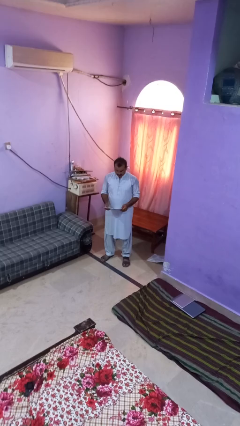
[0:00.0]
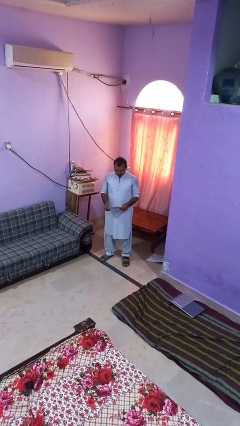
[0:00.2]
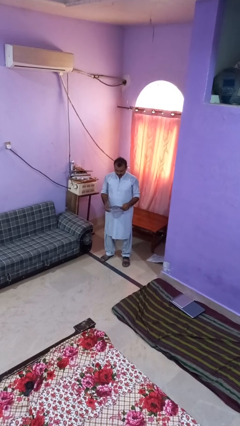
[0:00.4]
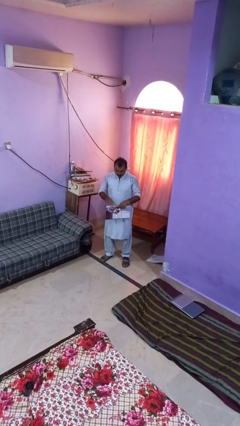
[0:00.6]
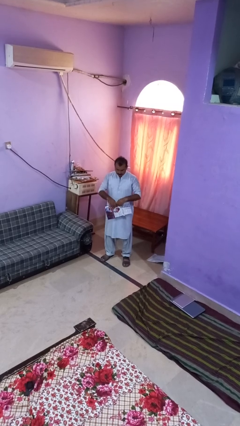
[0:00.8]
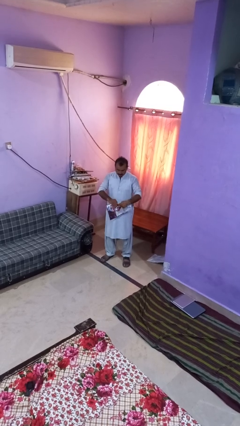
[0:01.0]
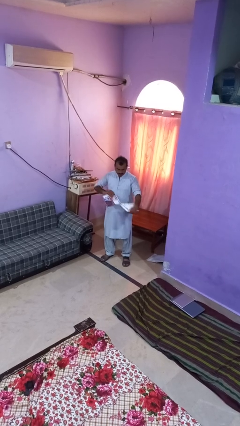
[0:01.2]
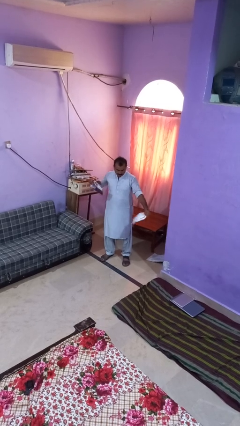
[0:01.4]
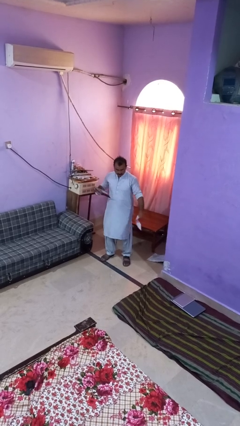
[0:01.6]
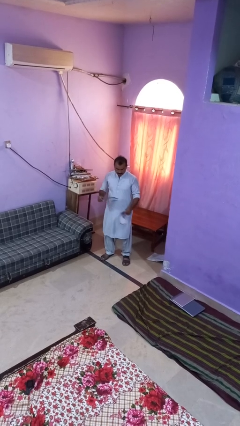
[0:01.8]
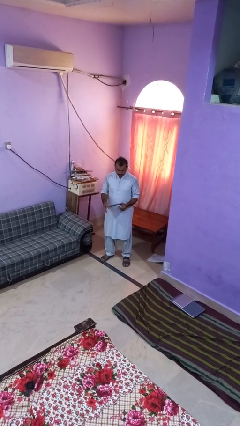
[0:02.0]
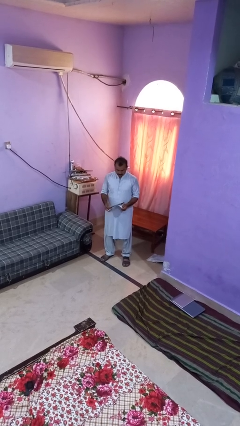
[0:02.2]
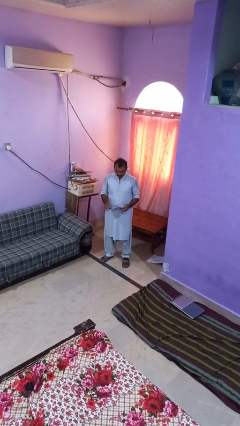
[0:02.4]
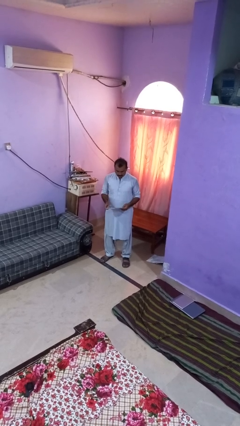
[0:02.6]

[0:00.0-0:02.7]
person tears paper

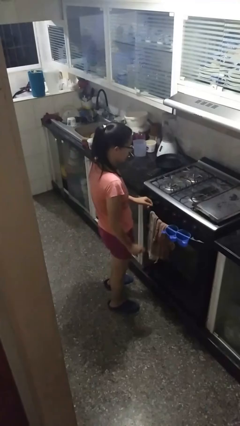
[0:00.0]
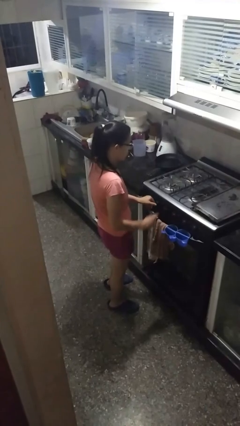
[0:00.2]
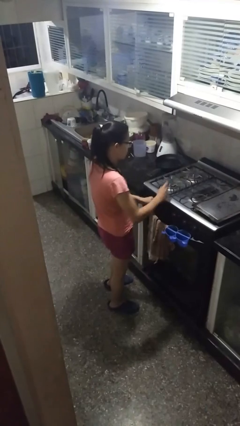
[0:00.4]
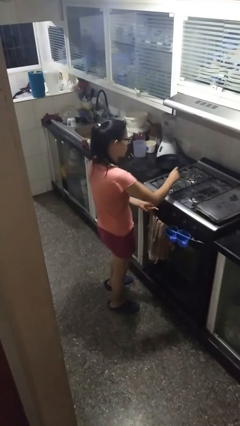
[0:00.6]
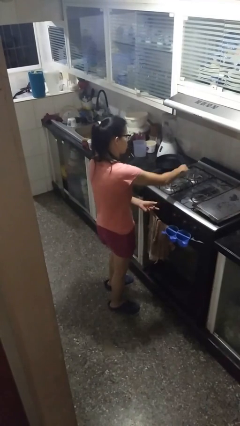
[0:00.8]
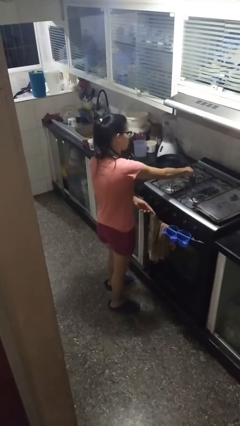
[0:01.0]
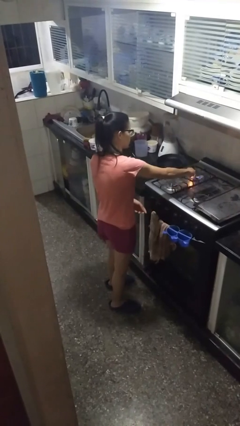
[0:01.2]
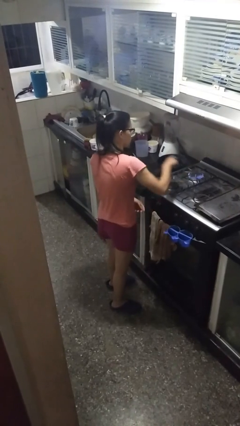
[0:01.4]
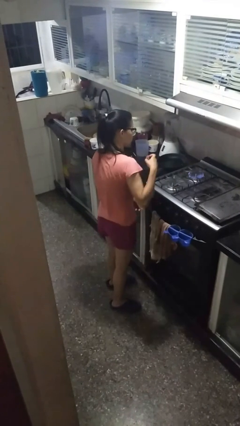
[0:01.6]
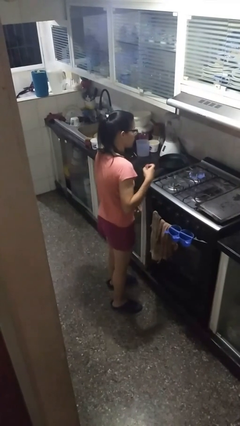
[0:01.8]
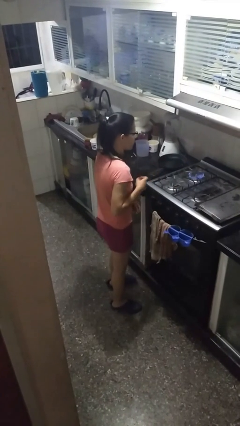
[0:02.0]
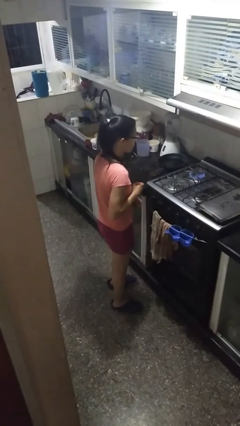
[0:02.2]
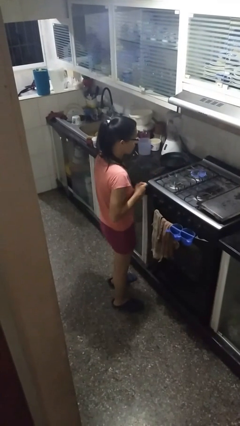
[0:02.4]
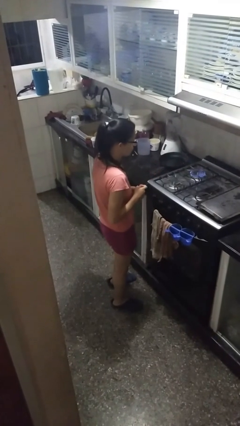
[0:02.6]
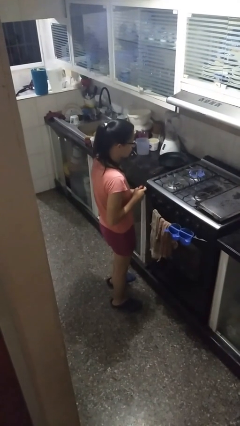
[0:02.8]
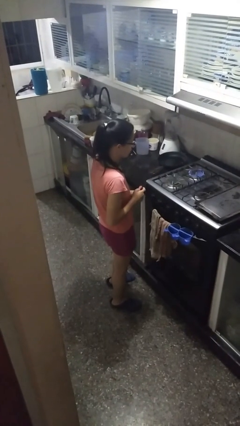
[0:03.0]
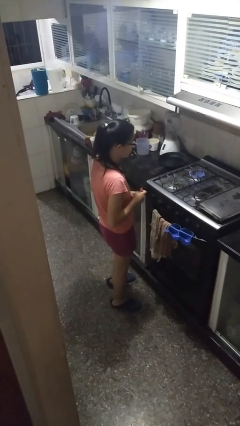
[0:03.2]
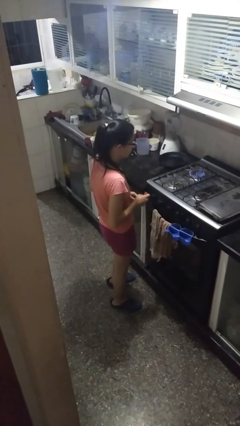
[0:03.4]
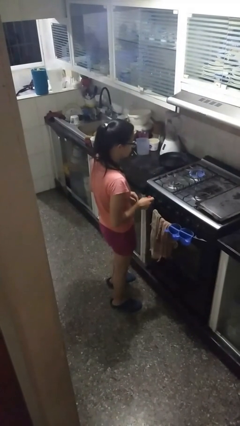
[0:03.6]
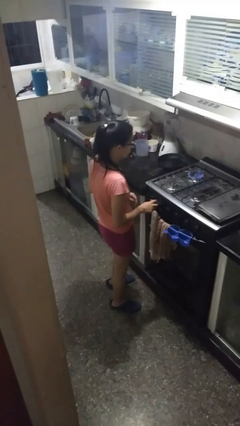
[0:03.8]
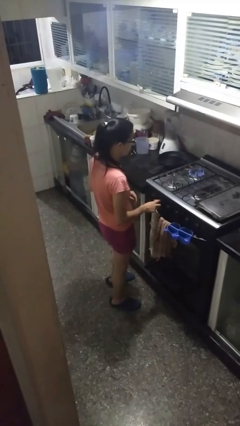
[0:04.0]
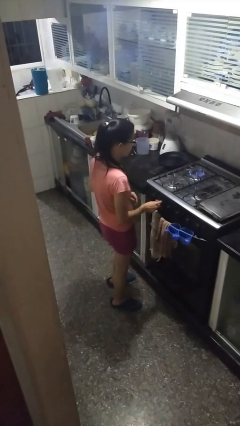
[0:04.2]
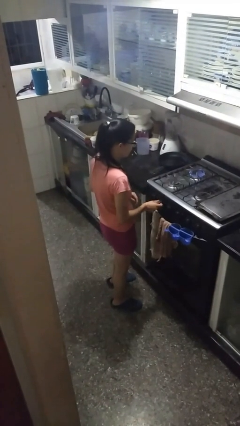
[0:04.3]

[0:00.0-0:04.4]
person turns on stovetop

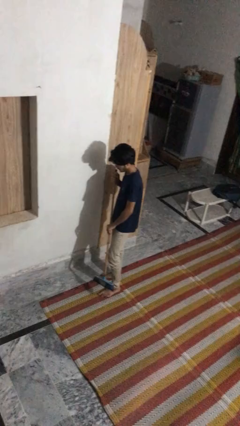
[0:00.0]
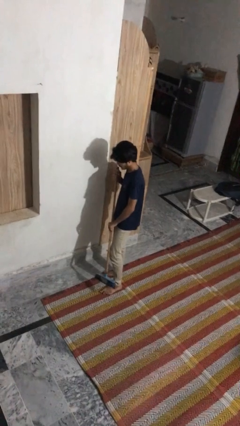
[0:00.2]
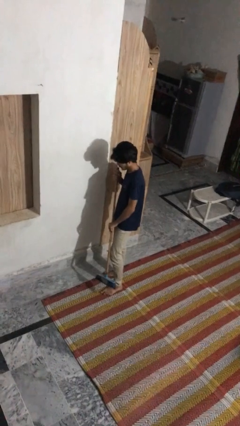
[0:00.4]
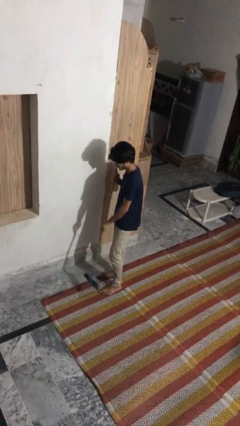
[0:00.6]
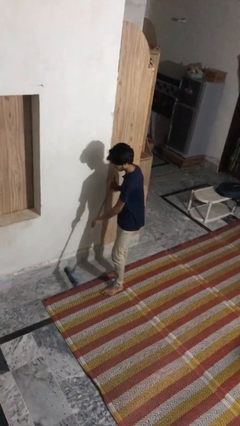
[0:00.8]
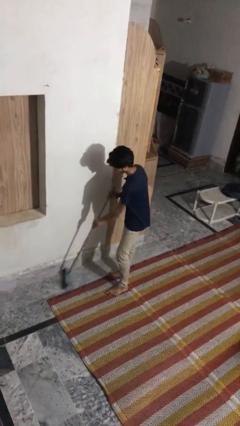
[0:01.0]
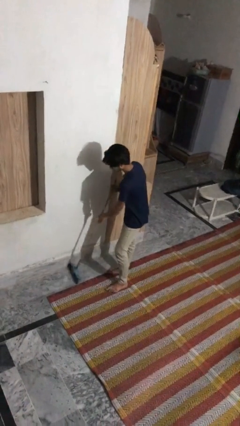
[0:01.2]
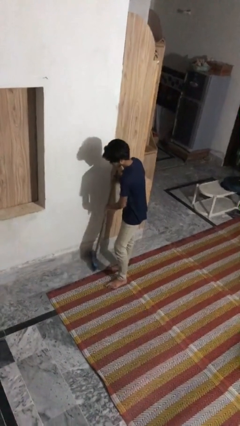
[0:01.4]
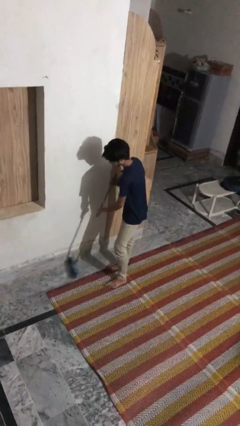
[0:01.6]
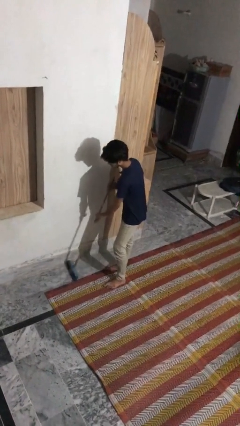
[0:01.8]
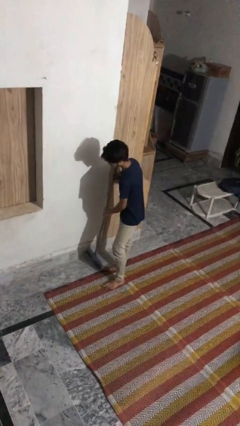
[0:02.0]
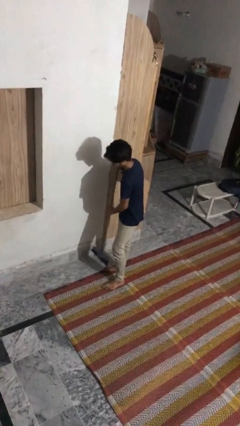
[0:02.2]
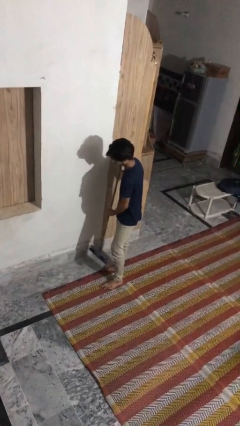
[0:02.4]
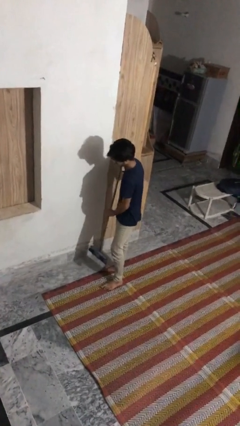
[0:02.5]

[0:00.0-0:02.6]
person sweeps floor

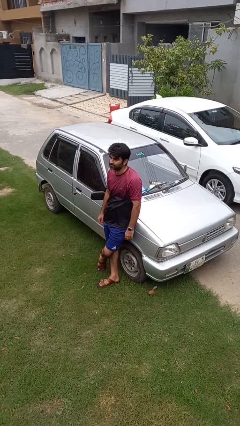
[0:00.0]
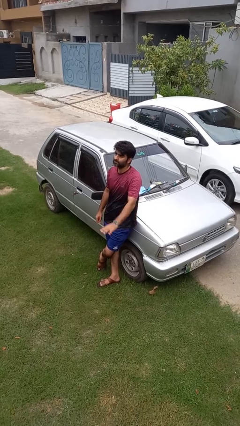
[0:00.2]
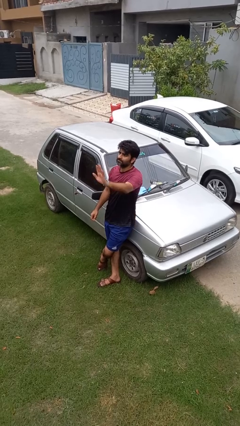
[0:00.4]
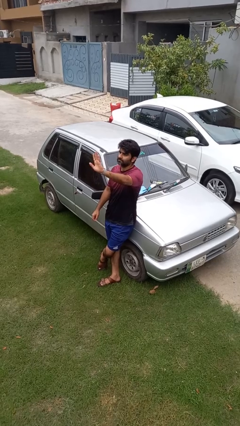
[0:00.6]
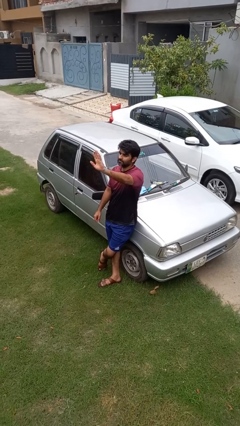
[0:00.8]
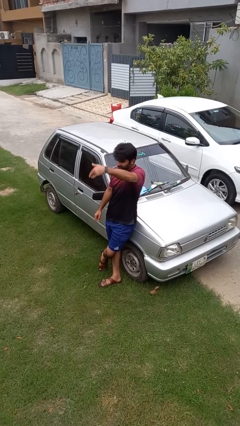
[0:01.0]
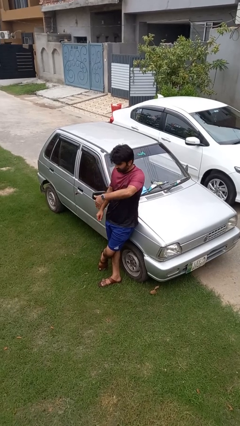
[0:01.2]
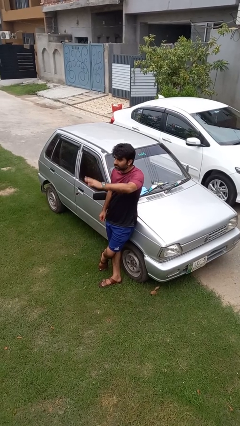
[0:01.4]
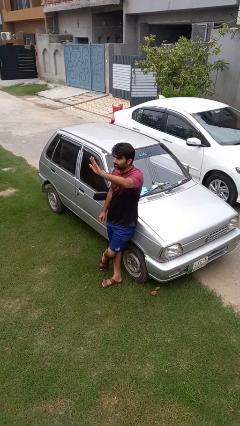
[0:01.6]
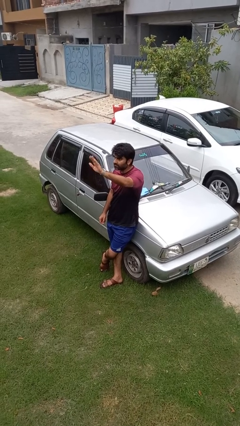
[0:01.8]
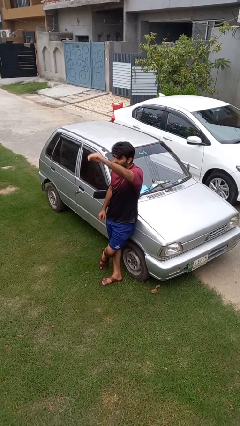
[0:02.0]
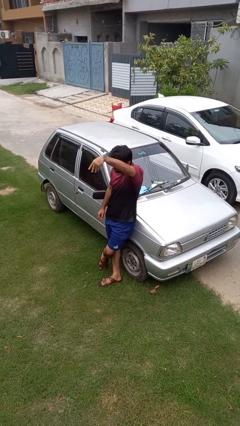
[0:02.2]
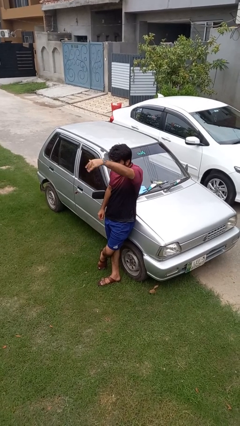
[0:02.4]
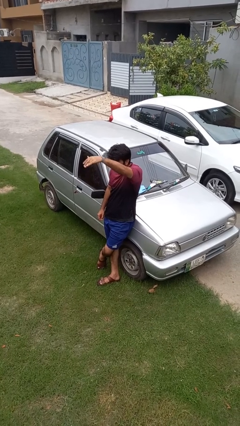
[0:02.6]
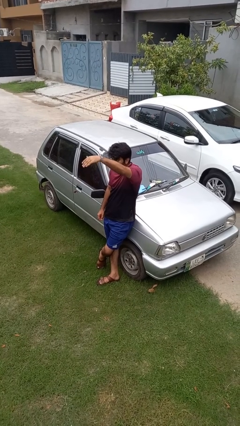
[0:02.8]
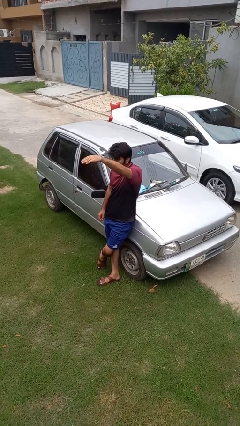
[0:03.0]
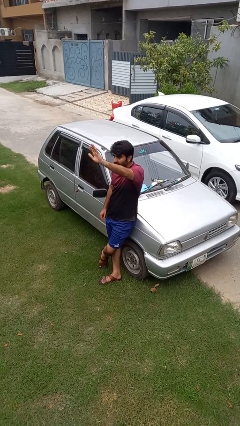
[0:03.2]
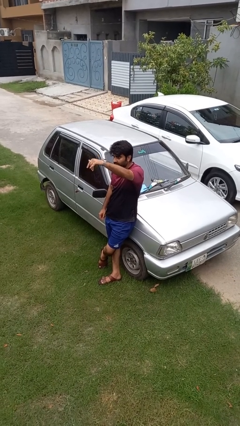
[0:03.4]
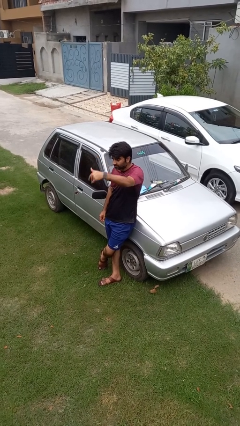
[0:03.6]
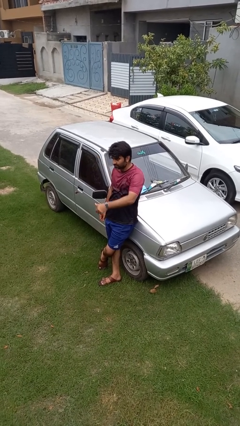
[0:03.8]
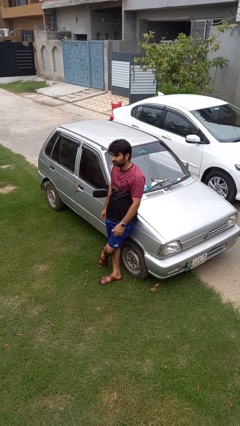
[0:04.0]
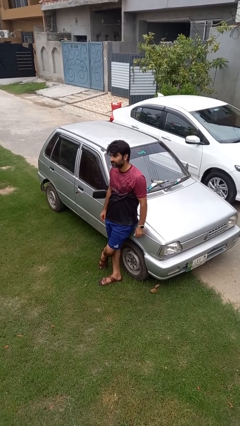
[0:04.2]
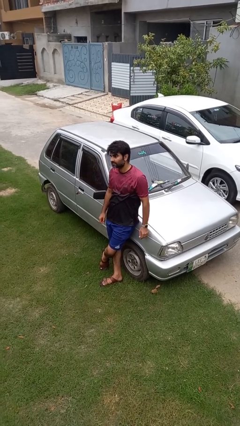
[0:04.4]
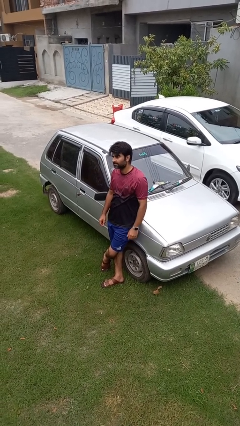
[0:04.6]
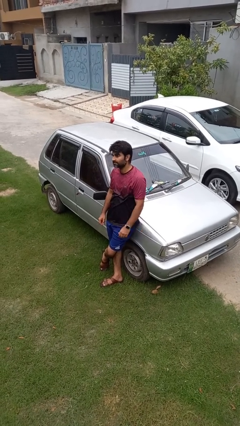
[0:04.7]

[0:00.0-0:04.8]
person gestures come here

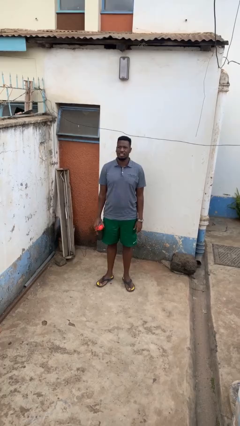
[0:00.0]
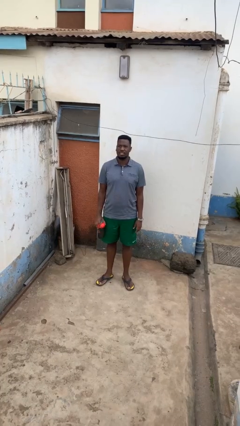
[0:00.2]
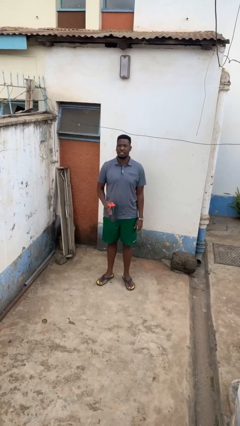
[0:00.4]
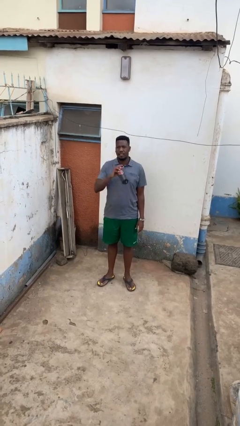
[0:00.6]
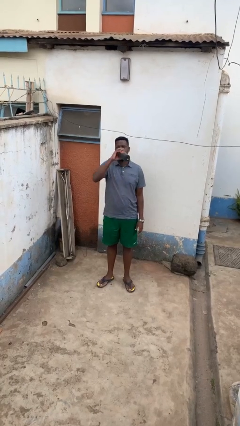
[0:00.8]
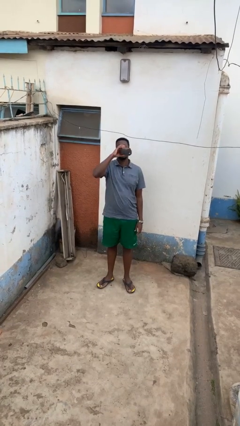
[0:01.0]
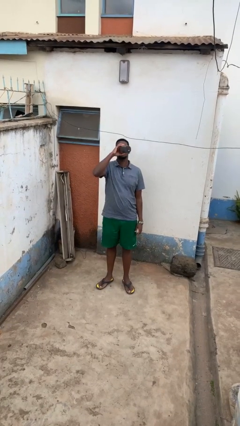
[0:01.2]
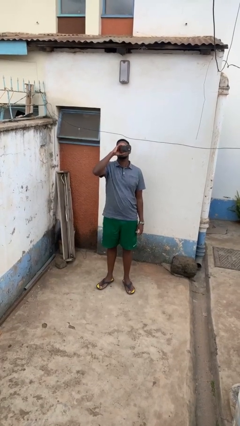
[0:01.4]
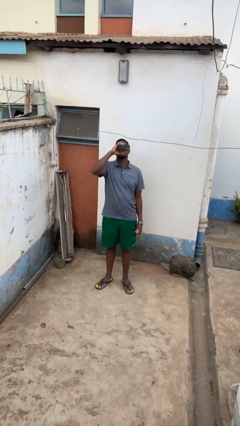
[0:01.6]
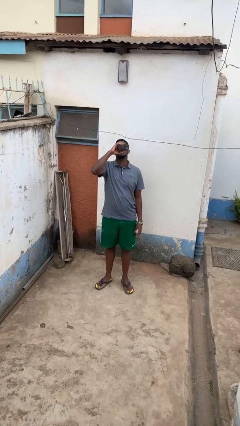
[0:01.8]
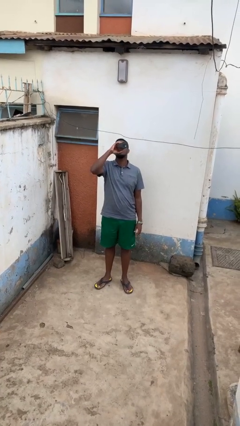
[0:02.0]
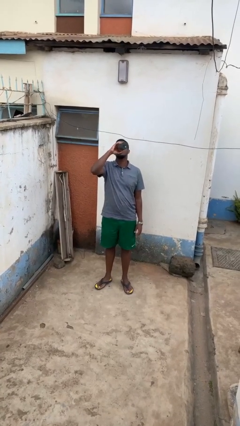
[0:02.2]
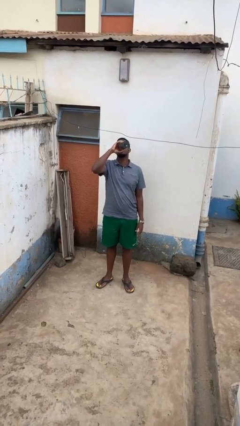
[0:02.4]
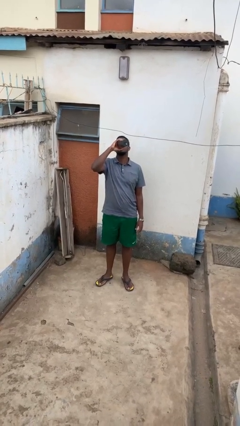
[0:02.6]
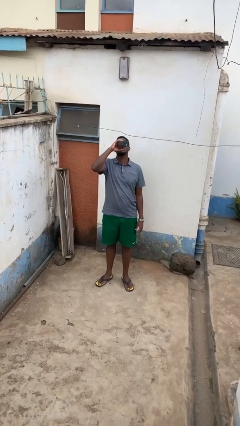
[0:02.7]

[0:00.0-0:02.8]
person drinks from bottle

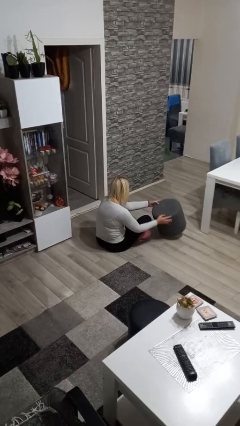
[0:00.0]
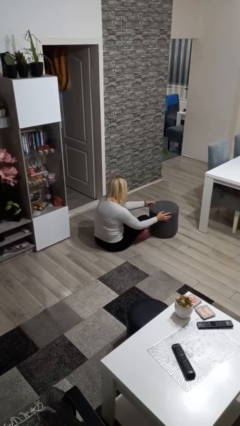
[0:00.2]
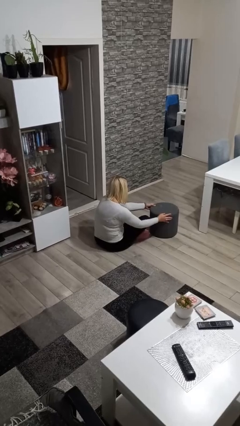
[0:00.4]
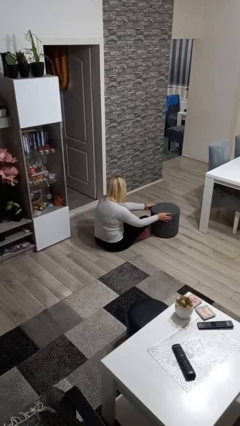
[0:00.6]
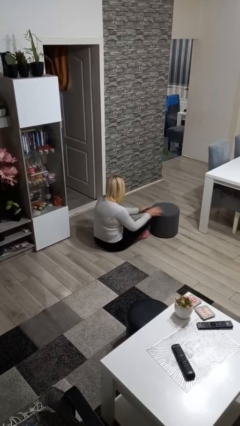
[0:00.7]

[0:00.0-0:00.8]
person sets upright furniture
